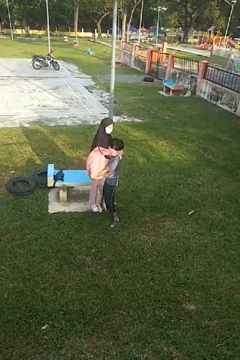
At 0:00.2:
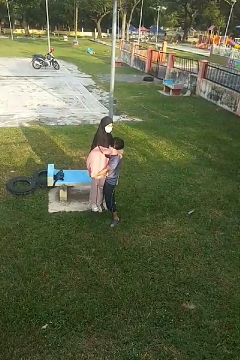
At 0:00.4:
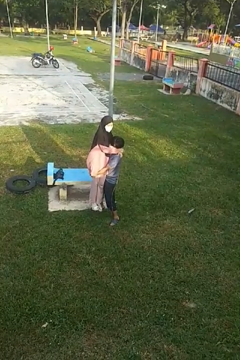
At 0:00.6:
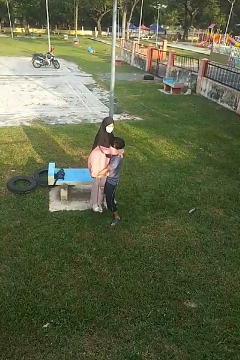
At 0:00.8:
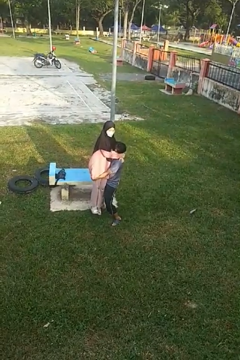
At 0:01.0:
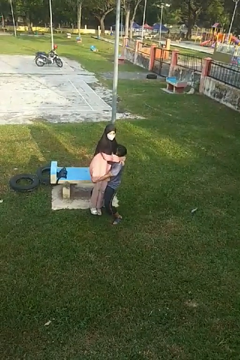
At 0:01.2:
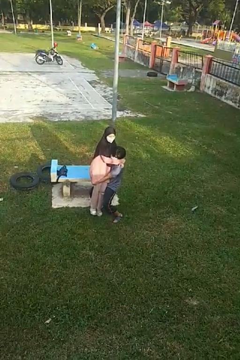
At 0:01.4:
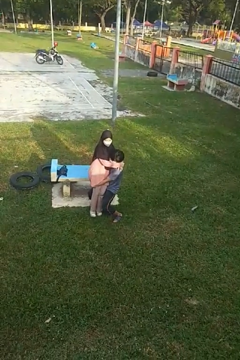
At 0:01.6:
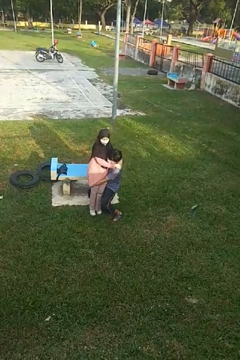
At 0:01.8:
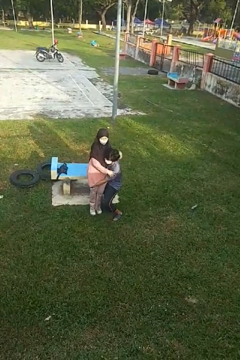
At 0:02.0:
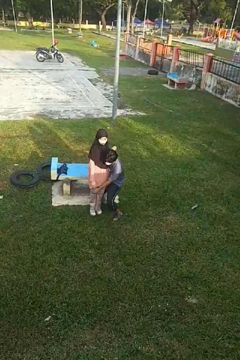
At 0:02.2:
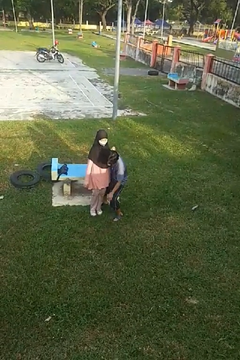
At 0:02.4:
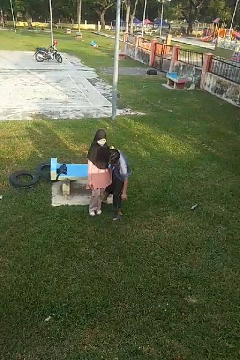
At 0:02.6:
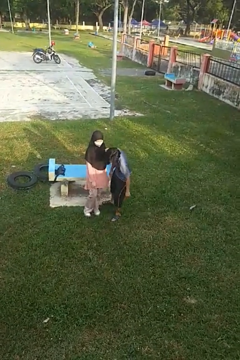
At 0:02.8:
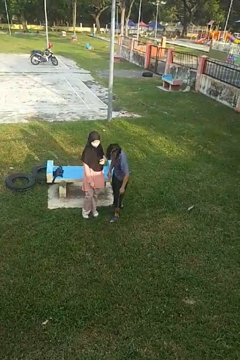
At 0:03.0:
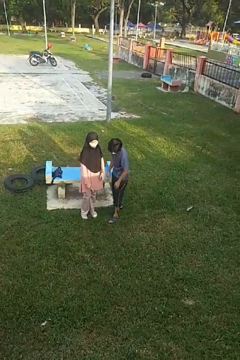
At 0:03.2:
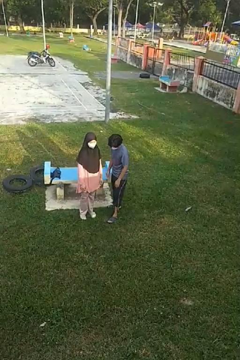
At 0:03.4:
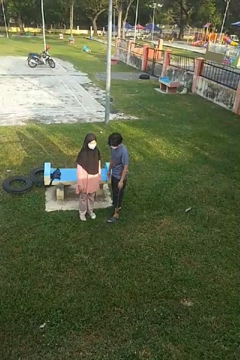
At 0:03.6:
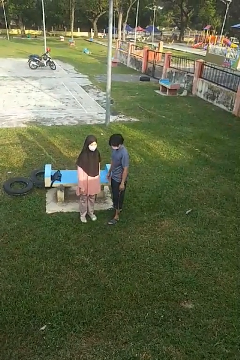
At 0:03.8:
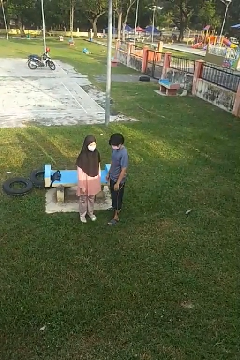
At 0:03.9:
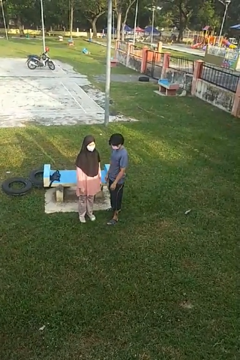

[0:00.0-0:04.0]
person puts down person

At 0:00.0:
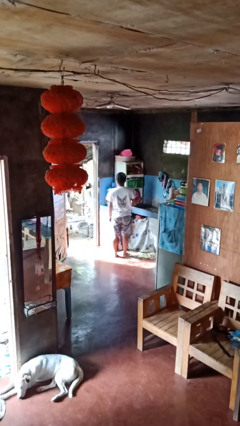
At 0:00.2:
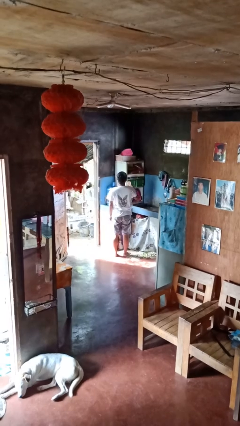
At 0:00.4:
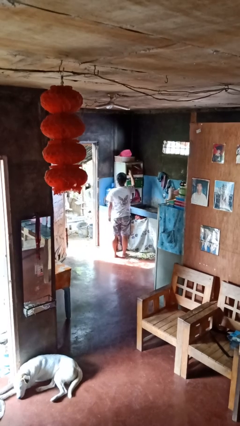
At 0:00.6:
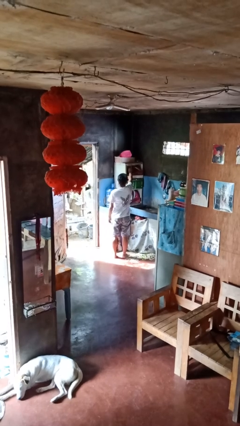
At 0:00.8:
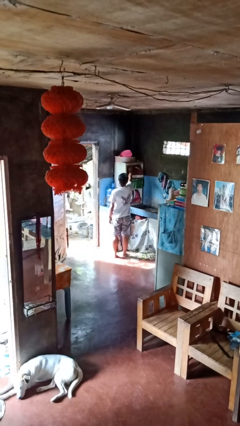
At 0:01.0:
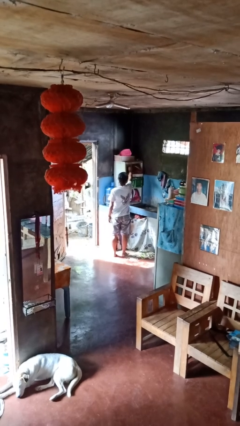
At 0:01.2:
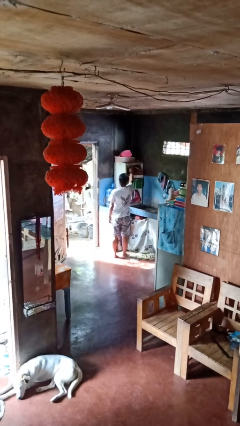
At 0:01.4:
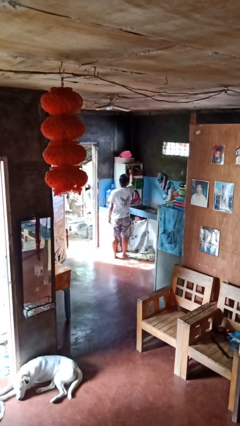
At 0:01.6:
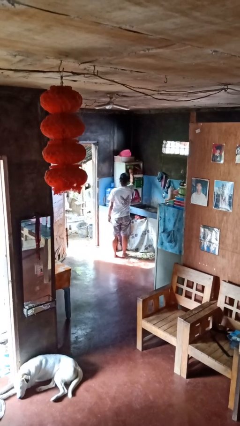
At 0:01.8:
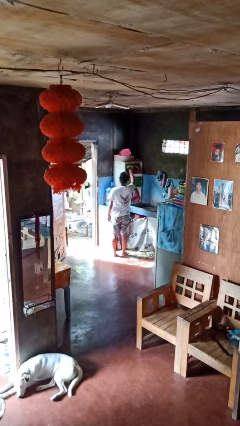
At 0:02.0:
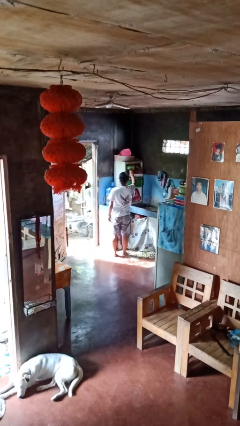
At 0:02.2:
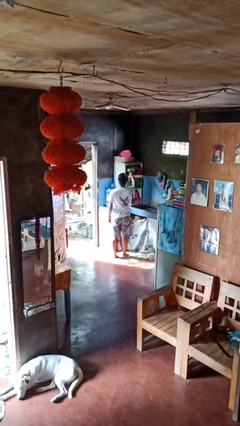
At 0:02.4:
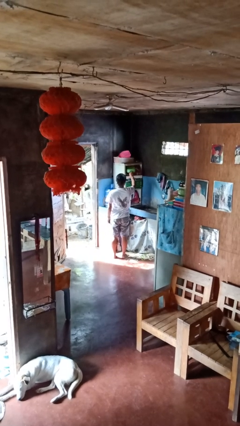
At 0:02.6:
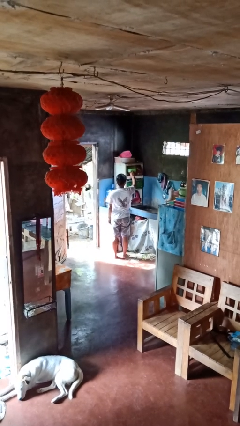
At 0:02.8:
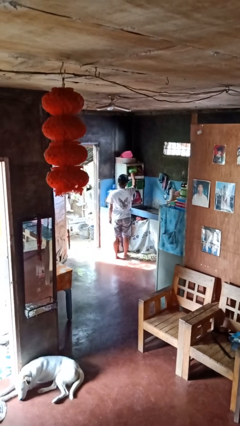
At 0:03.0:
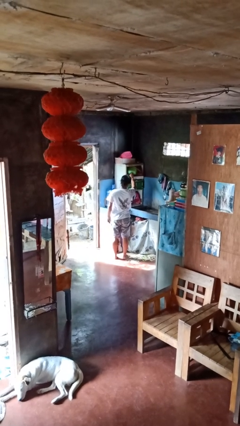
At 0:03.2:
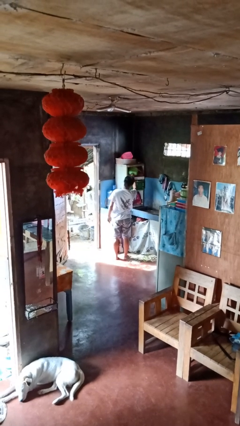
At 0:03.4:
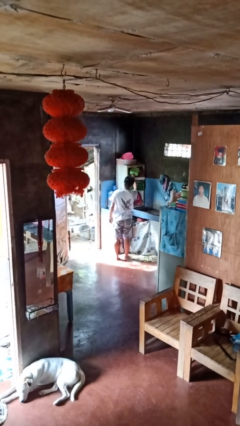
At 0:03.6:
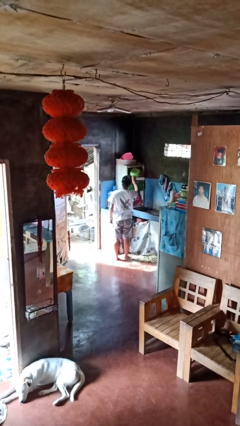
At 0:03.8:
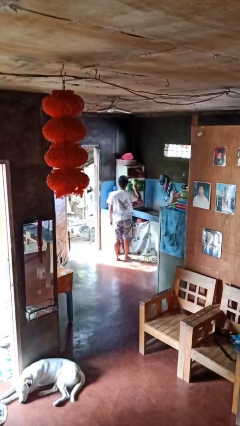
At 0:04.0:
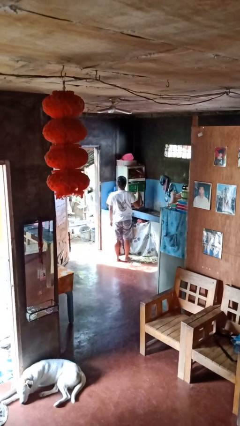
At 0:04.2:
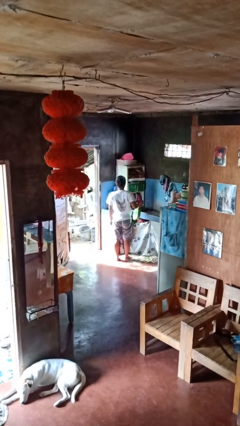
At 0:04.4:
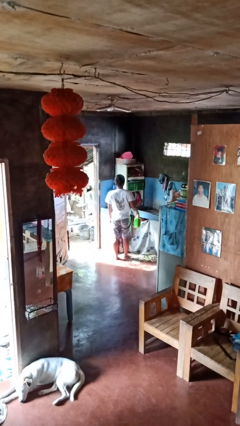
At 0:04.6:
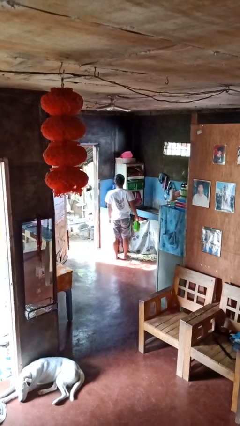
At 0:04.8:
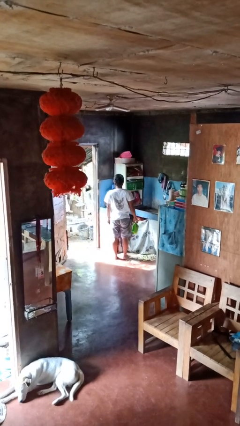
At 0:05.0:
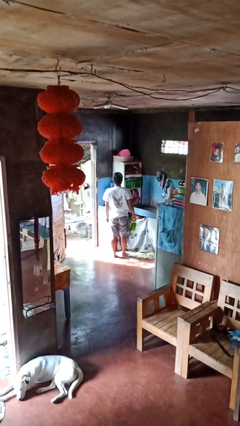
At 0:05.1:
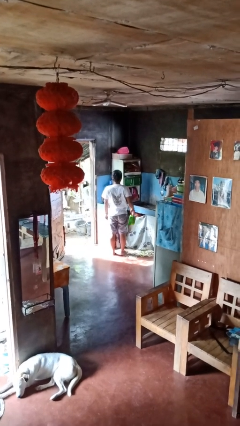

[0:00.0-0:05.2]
person takes object from cabinet

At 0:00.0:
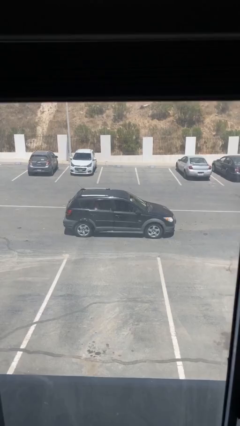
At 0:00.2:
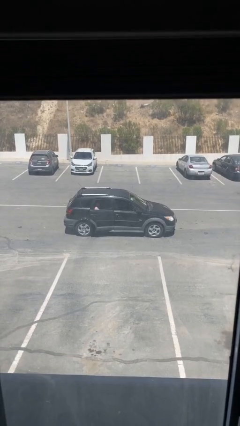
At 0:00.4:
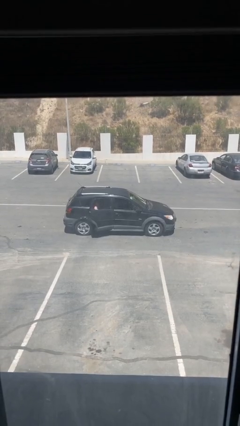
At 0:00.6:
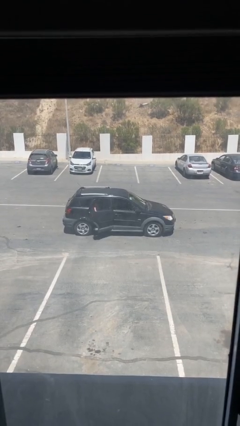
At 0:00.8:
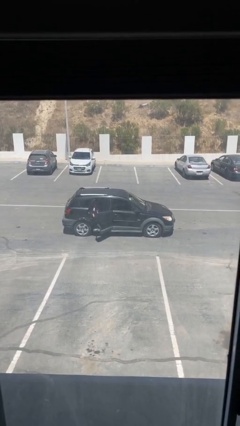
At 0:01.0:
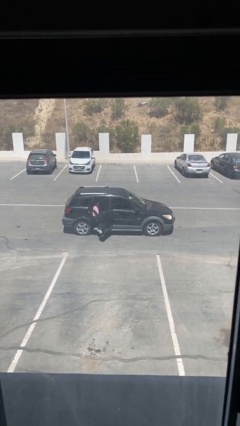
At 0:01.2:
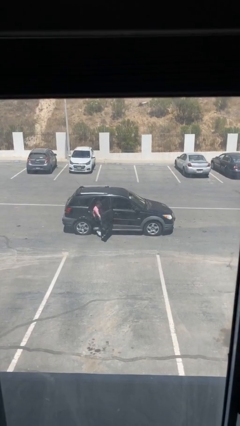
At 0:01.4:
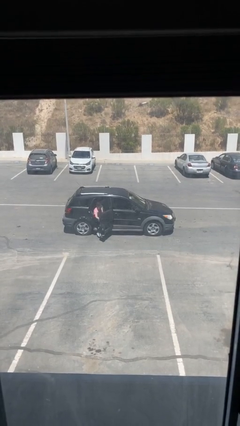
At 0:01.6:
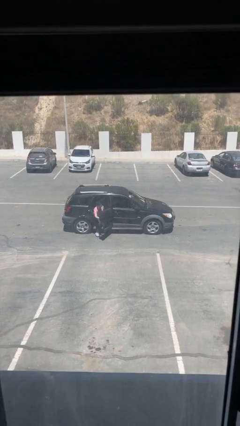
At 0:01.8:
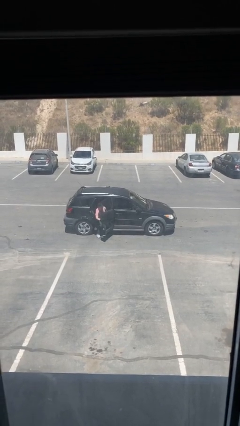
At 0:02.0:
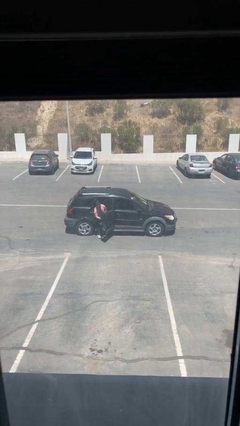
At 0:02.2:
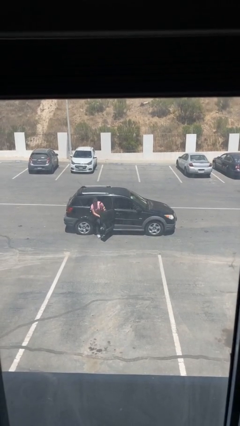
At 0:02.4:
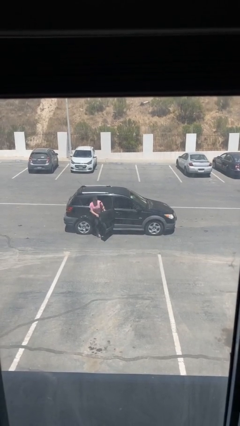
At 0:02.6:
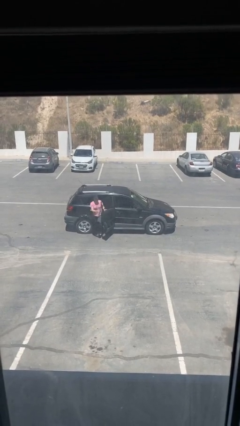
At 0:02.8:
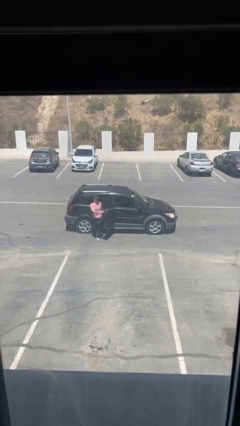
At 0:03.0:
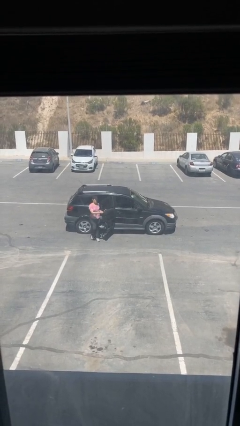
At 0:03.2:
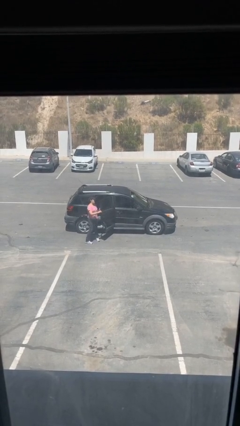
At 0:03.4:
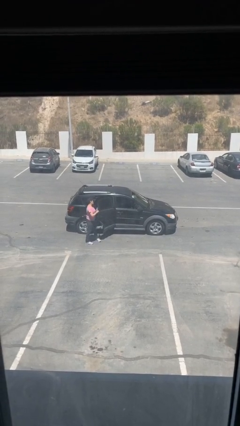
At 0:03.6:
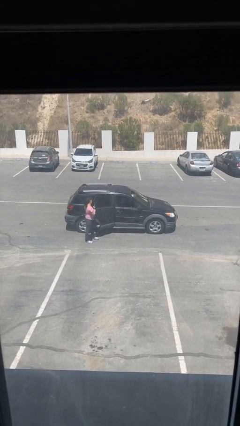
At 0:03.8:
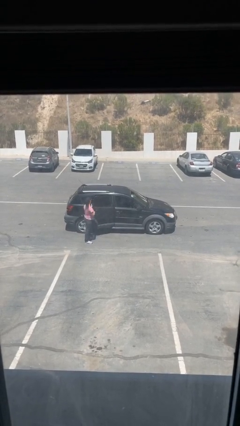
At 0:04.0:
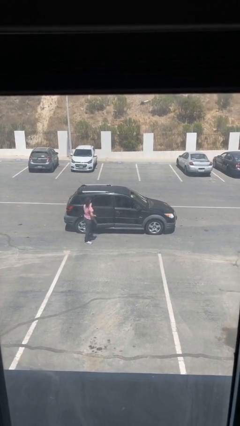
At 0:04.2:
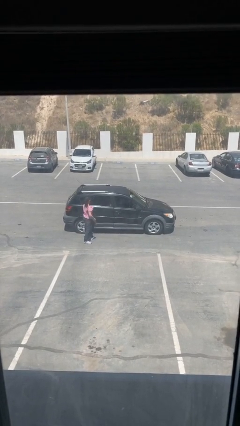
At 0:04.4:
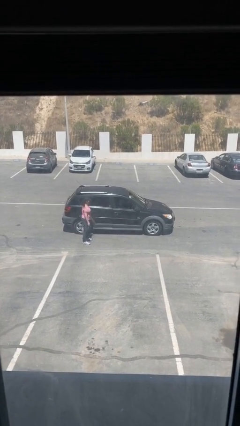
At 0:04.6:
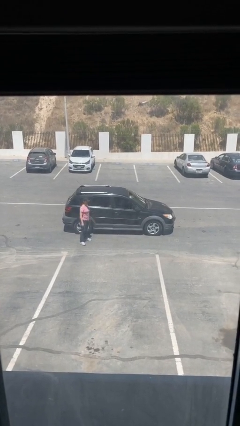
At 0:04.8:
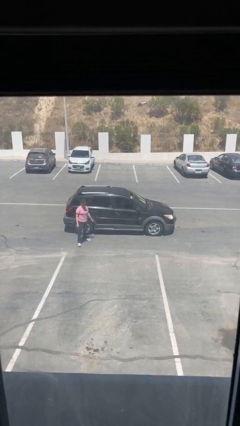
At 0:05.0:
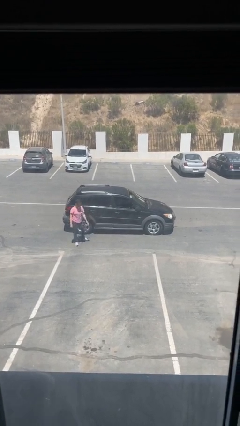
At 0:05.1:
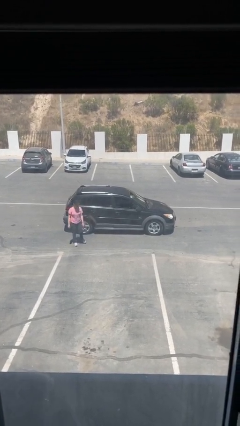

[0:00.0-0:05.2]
car drops off person

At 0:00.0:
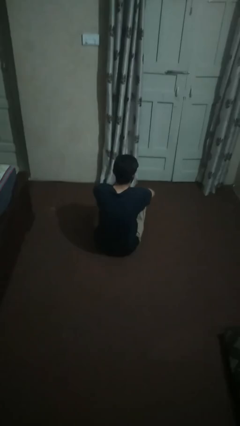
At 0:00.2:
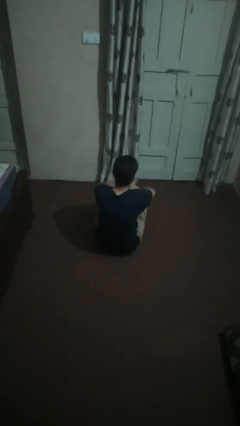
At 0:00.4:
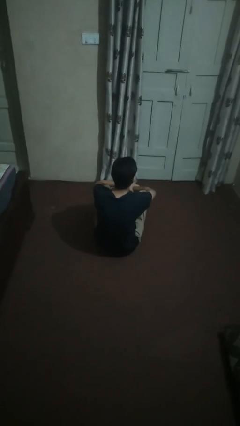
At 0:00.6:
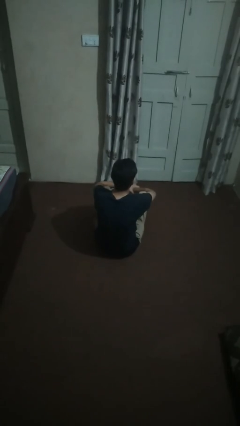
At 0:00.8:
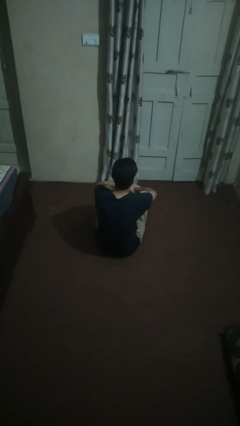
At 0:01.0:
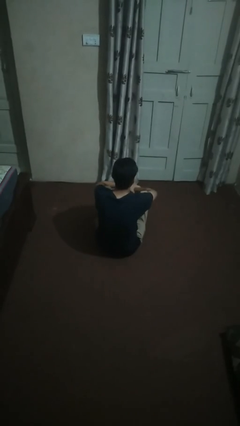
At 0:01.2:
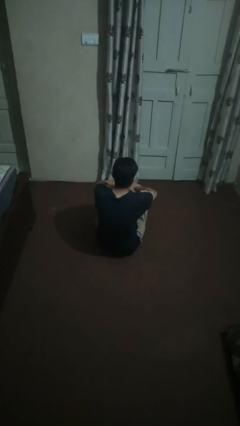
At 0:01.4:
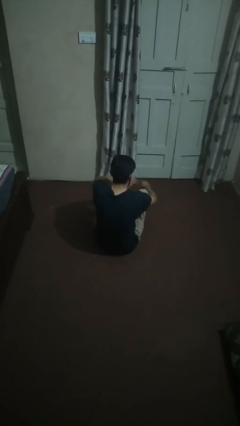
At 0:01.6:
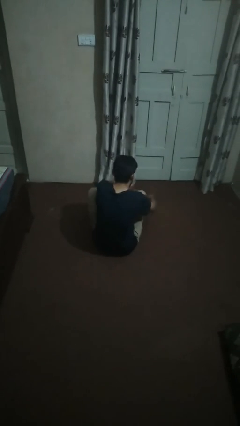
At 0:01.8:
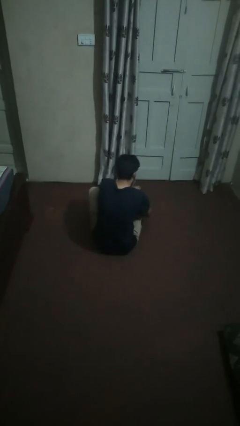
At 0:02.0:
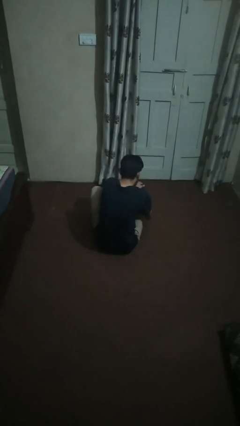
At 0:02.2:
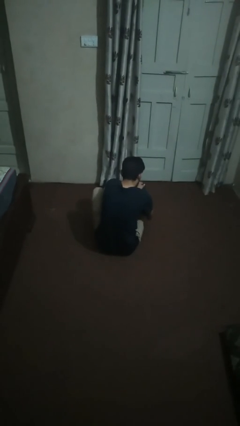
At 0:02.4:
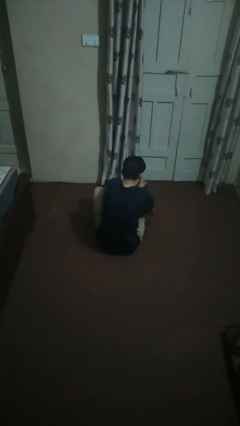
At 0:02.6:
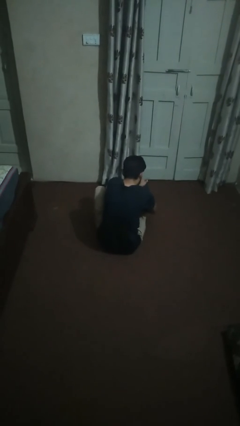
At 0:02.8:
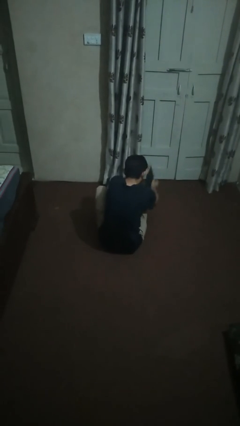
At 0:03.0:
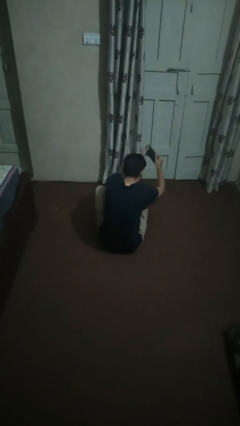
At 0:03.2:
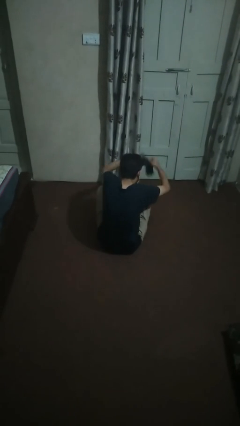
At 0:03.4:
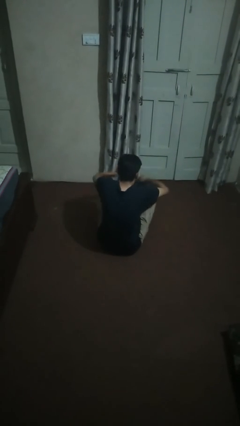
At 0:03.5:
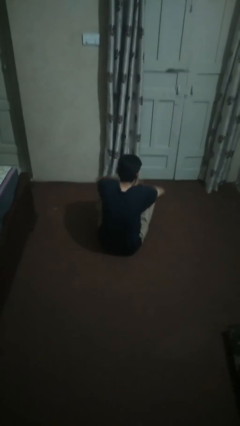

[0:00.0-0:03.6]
person takes off socks
